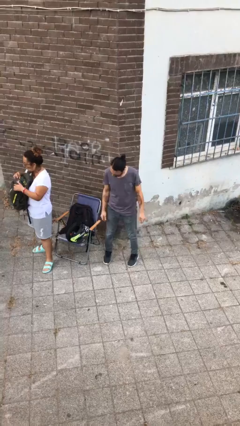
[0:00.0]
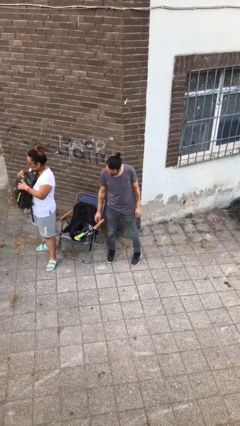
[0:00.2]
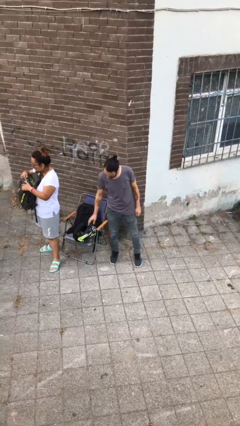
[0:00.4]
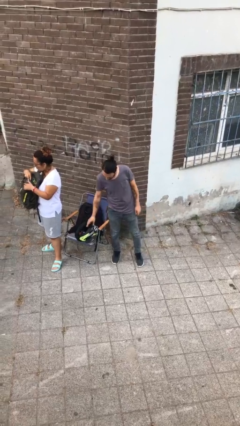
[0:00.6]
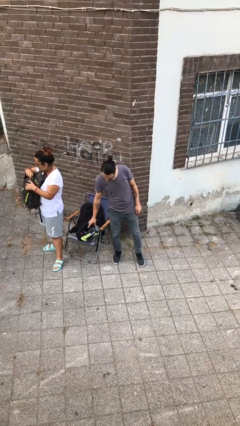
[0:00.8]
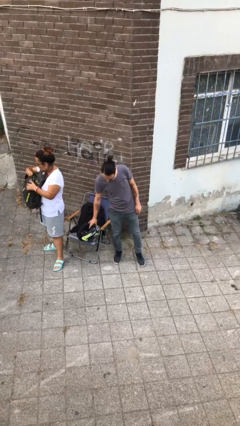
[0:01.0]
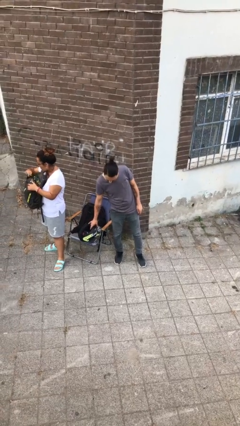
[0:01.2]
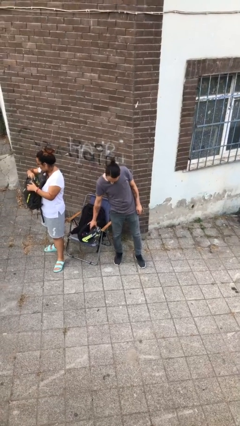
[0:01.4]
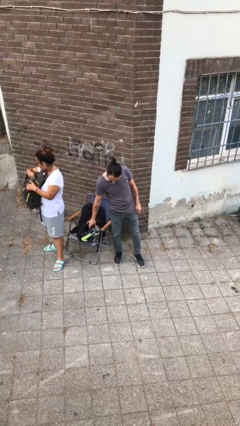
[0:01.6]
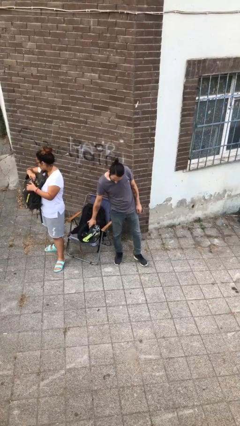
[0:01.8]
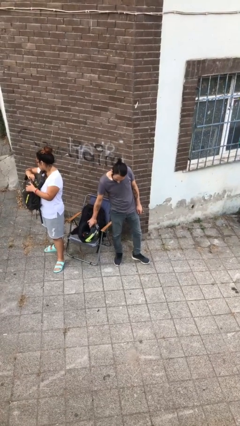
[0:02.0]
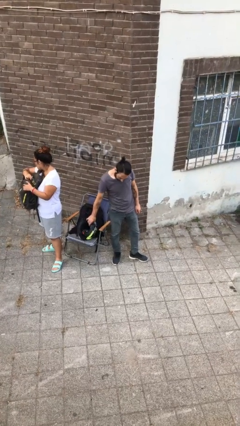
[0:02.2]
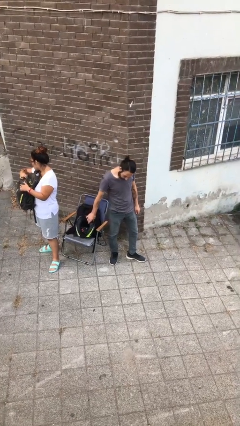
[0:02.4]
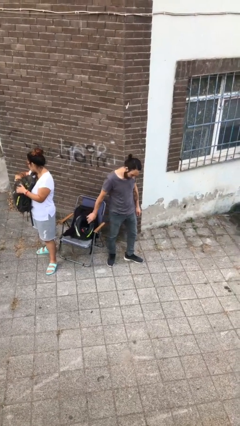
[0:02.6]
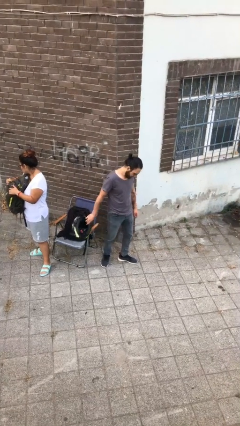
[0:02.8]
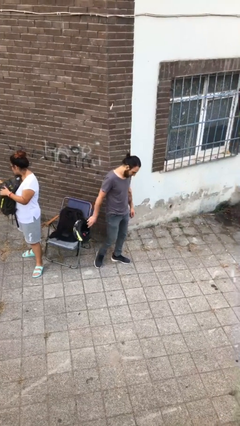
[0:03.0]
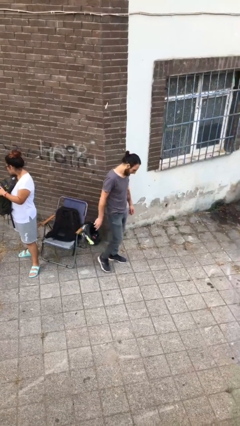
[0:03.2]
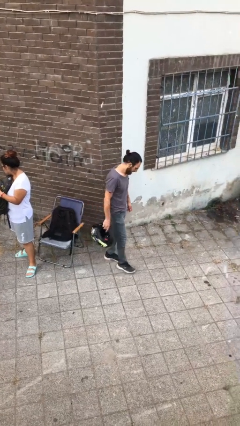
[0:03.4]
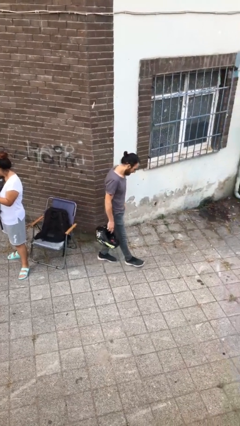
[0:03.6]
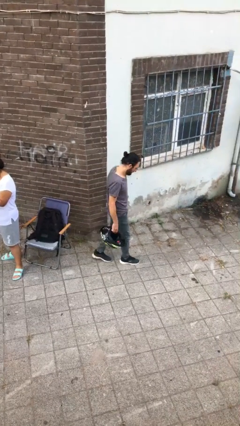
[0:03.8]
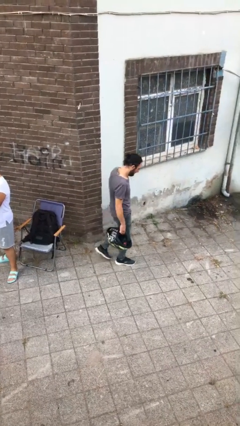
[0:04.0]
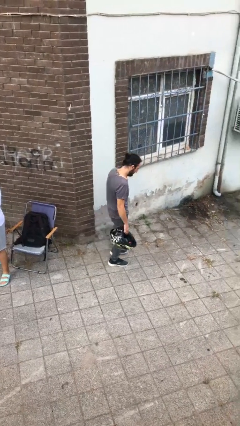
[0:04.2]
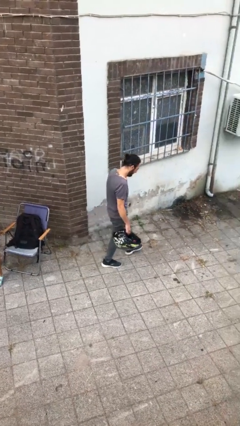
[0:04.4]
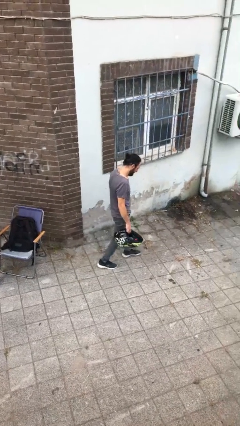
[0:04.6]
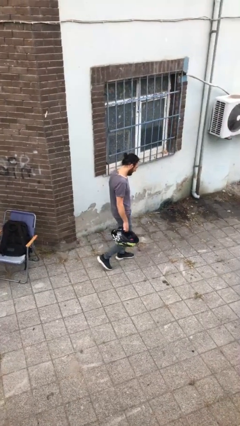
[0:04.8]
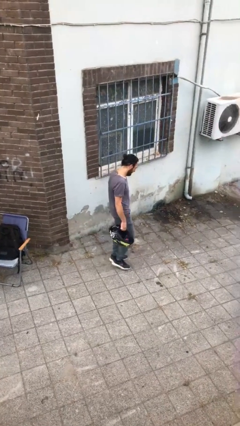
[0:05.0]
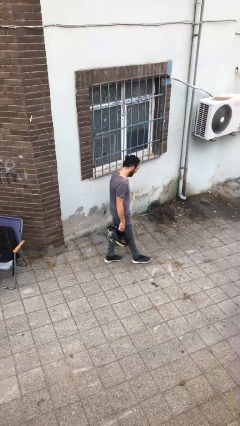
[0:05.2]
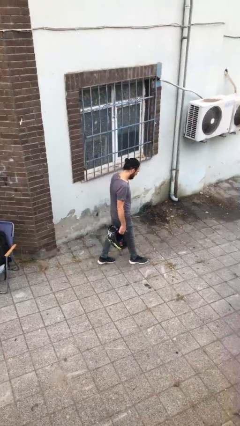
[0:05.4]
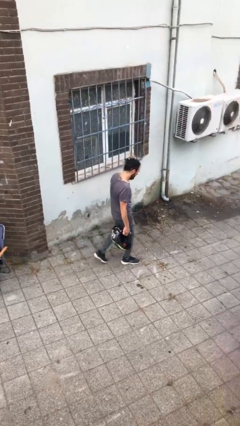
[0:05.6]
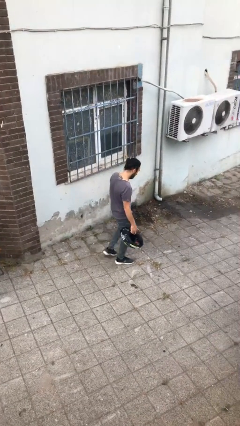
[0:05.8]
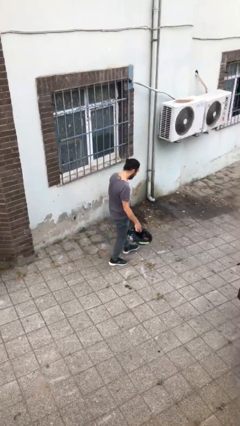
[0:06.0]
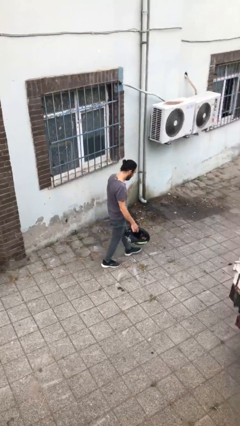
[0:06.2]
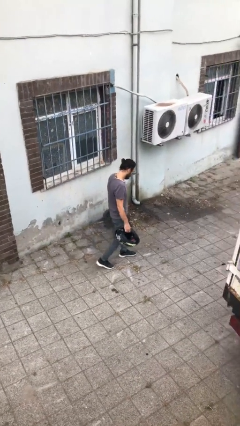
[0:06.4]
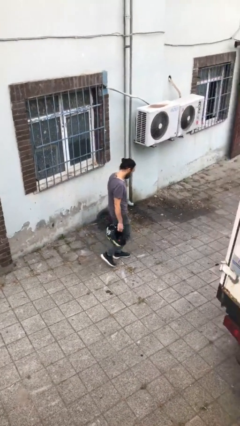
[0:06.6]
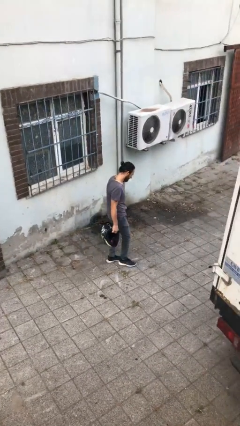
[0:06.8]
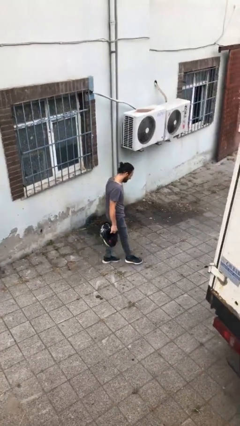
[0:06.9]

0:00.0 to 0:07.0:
person steals object from person

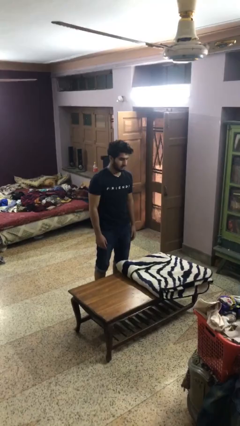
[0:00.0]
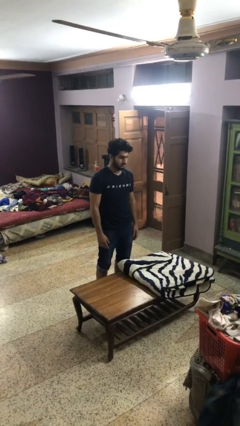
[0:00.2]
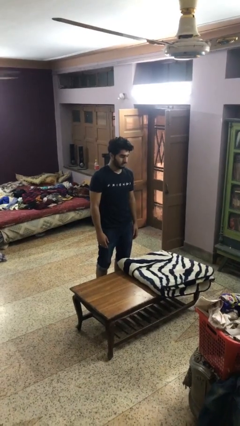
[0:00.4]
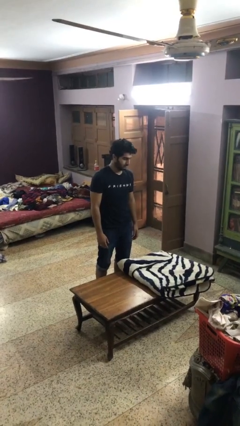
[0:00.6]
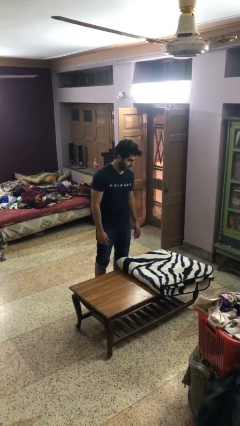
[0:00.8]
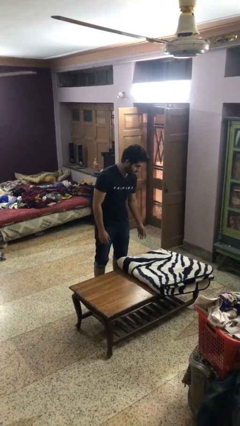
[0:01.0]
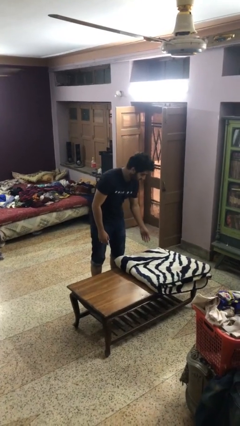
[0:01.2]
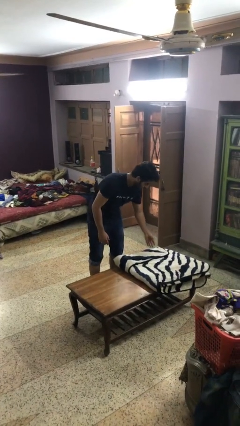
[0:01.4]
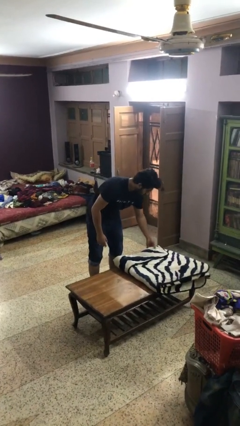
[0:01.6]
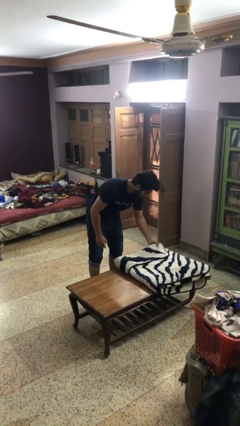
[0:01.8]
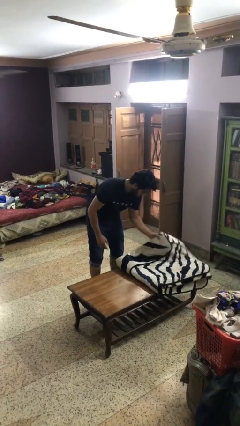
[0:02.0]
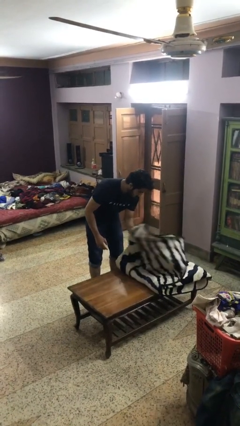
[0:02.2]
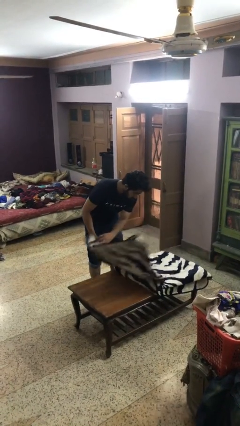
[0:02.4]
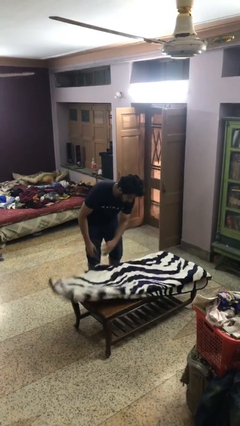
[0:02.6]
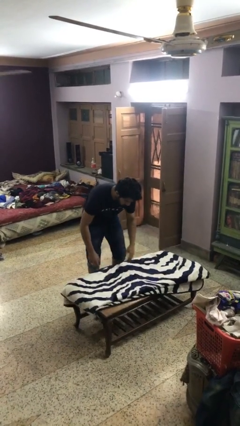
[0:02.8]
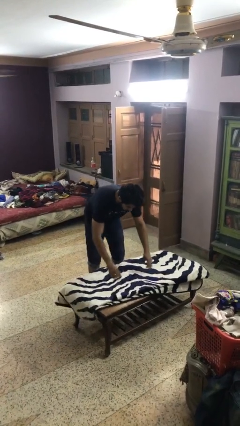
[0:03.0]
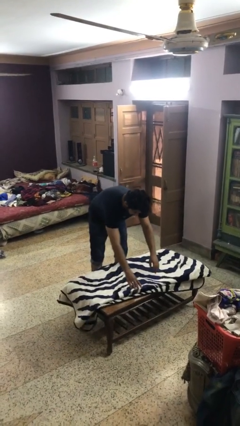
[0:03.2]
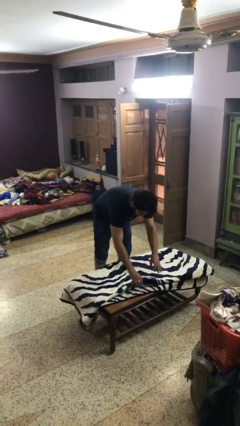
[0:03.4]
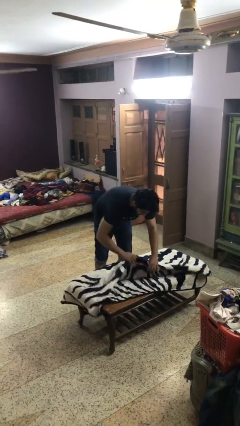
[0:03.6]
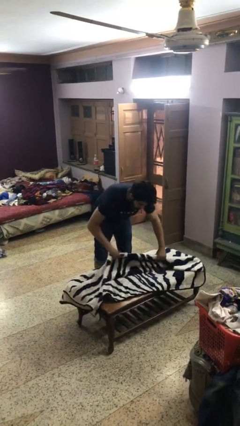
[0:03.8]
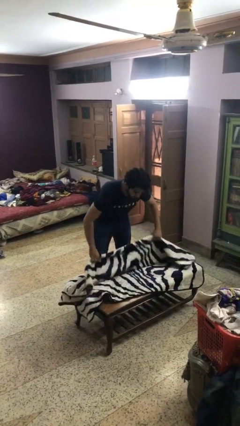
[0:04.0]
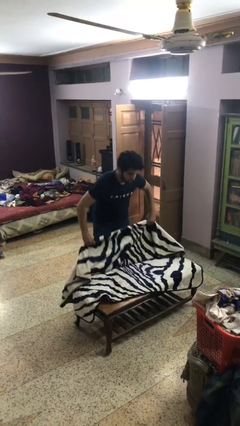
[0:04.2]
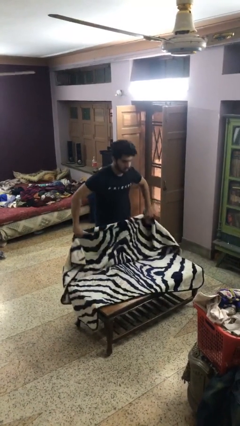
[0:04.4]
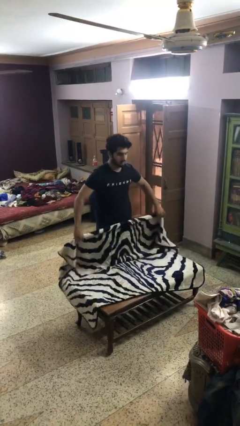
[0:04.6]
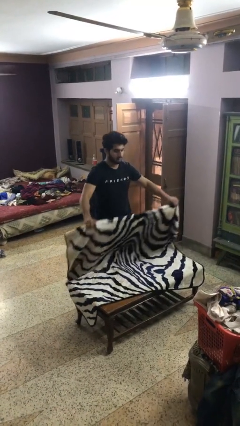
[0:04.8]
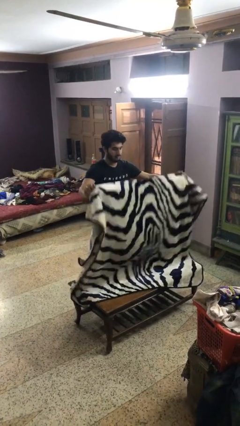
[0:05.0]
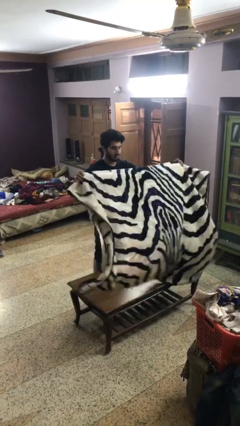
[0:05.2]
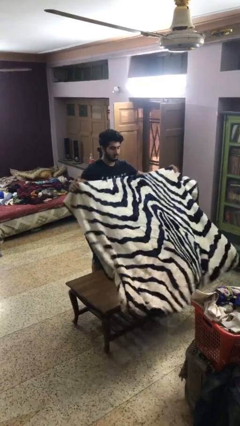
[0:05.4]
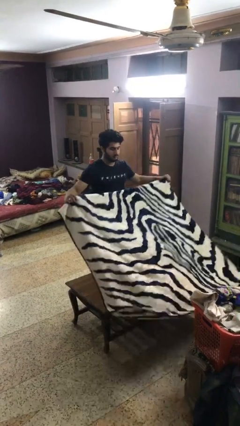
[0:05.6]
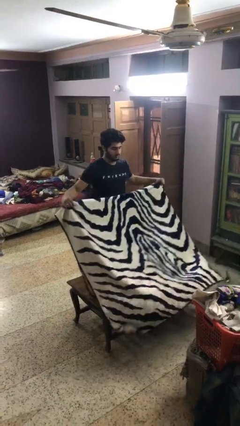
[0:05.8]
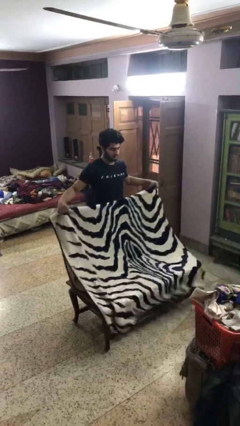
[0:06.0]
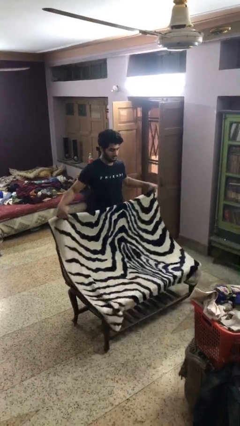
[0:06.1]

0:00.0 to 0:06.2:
person unfolds blanket

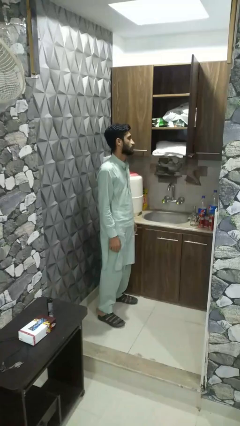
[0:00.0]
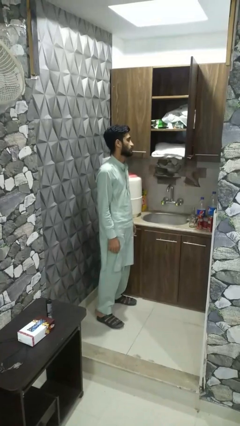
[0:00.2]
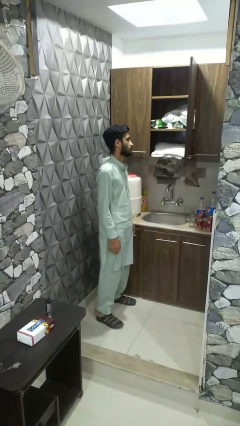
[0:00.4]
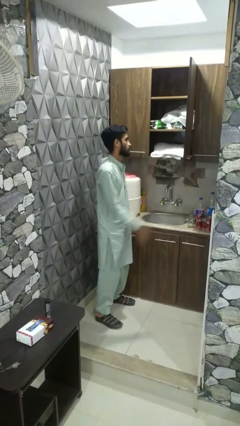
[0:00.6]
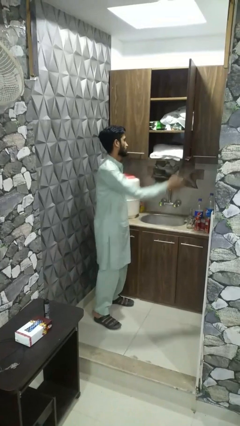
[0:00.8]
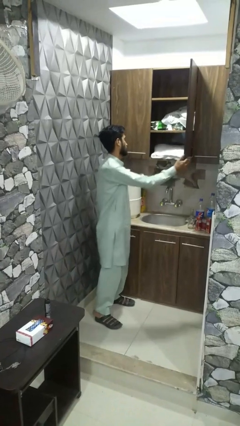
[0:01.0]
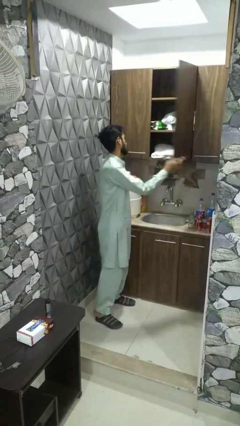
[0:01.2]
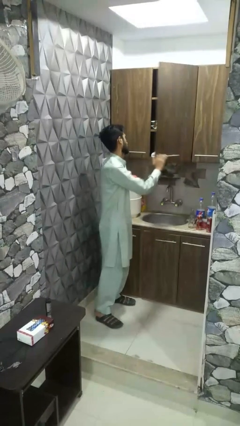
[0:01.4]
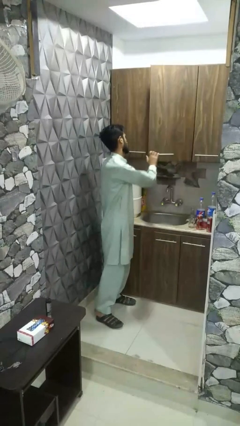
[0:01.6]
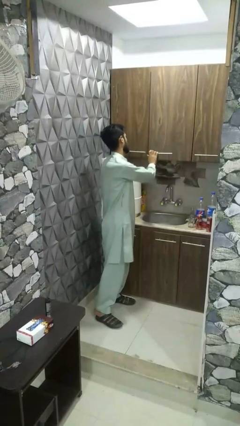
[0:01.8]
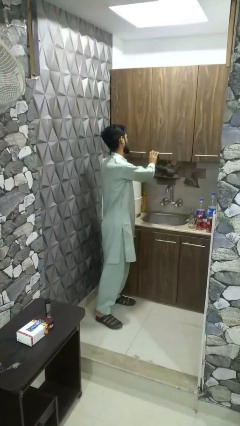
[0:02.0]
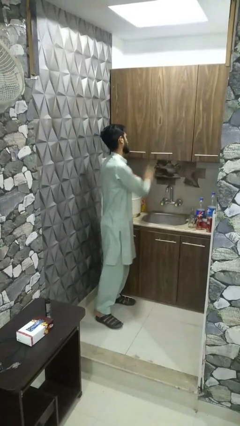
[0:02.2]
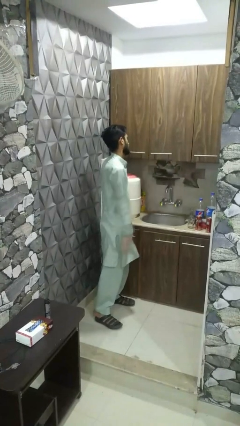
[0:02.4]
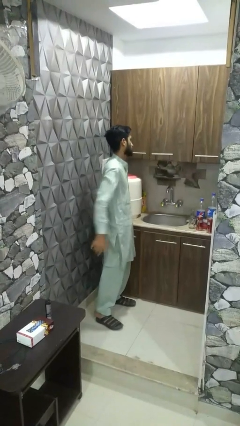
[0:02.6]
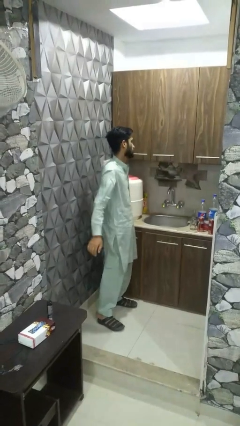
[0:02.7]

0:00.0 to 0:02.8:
person closes dresser drawer

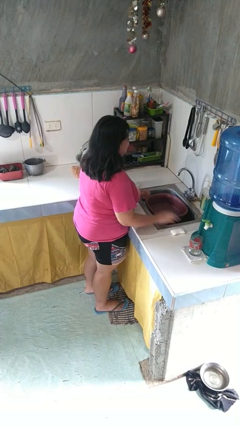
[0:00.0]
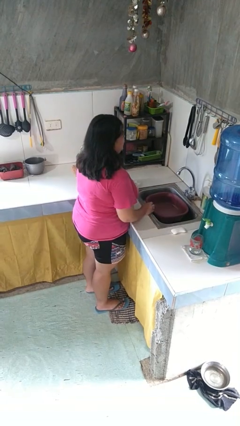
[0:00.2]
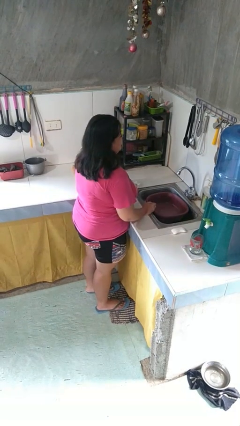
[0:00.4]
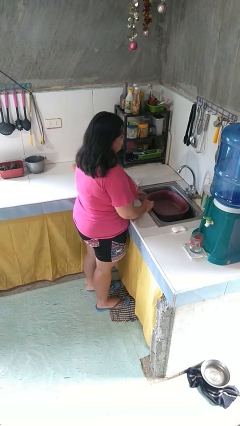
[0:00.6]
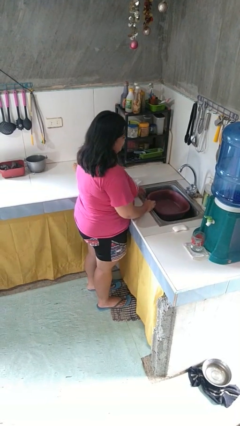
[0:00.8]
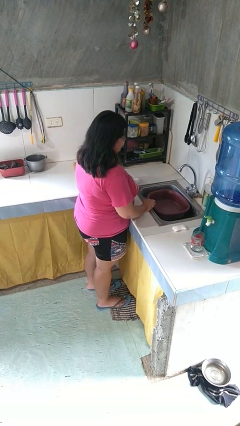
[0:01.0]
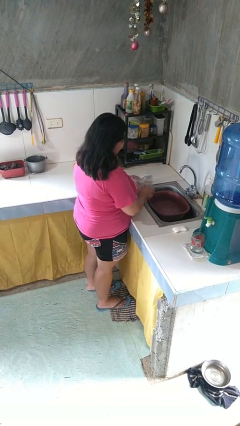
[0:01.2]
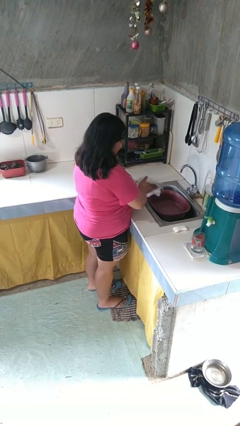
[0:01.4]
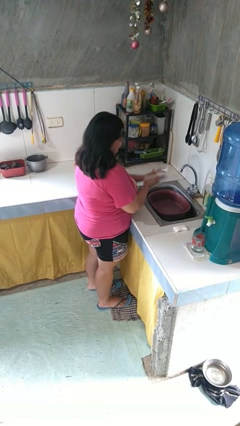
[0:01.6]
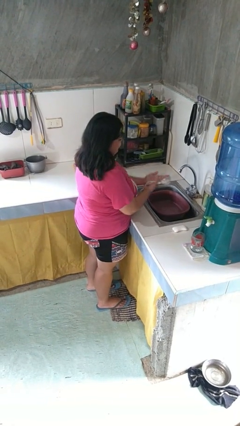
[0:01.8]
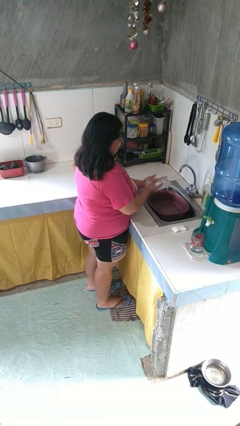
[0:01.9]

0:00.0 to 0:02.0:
person dries hands with towel
